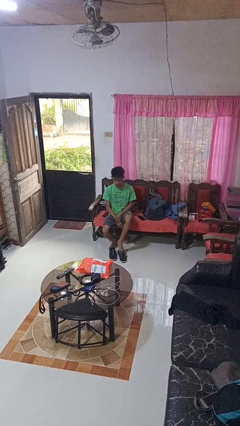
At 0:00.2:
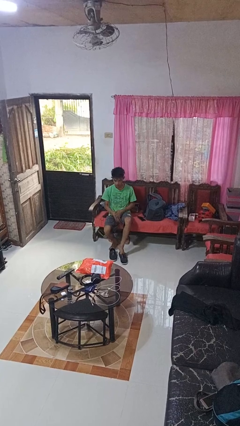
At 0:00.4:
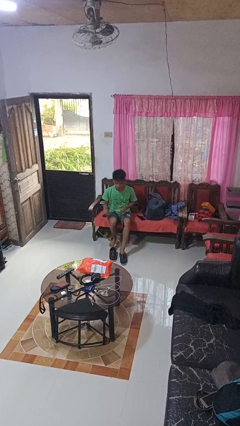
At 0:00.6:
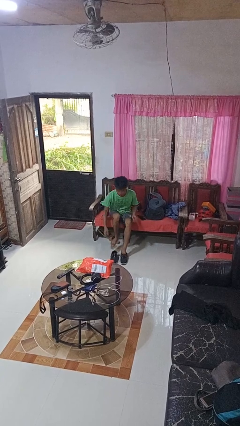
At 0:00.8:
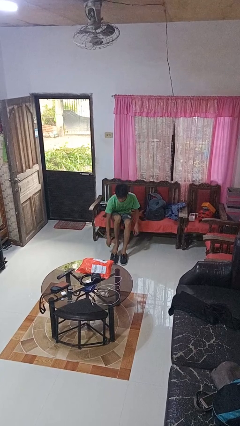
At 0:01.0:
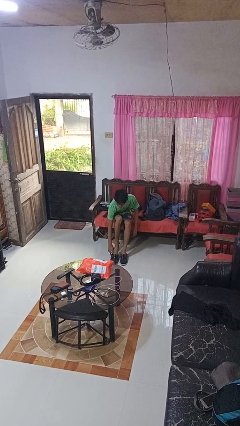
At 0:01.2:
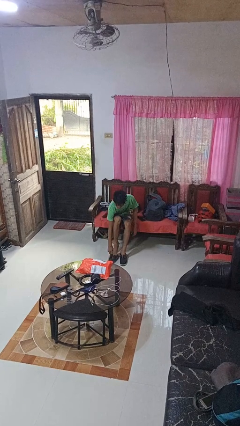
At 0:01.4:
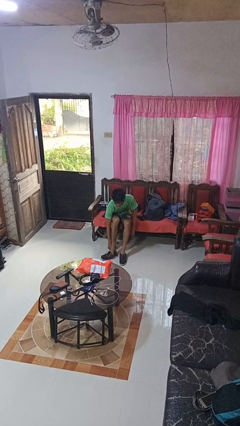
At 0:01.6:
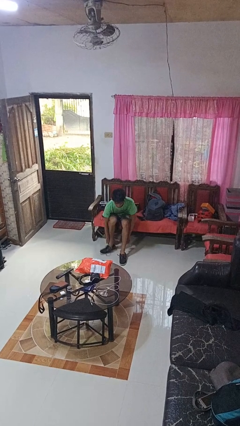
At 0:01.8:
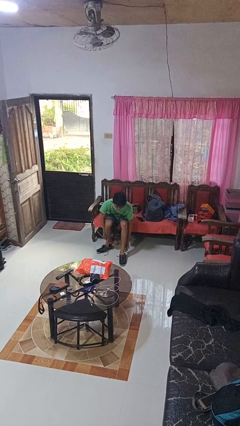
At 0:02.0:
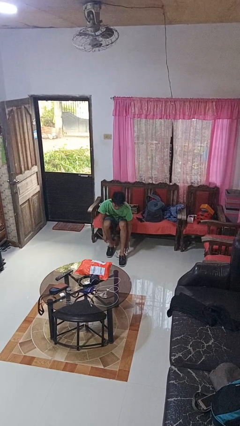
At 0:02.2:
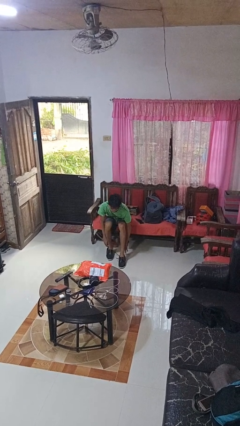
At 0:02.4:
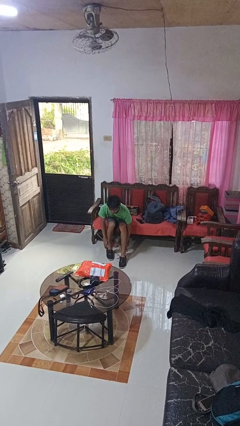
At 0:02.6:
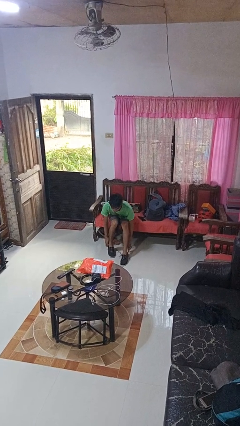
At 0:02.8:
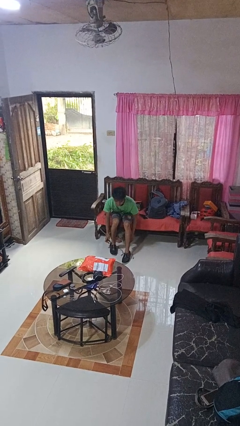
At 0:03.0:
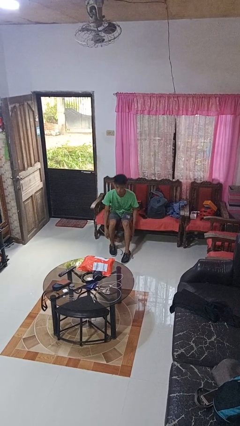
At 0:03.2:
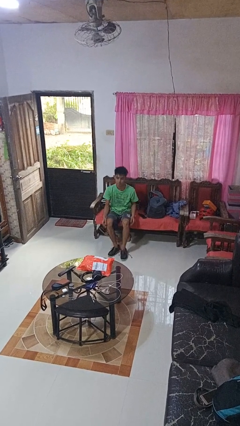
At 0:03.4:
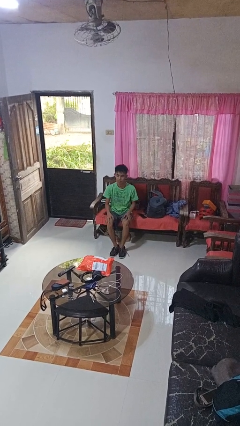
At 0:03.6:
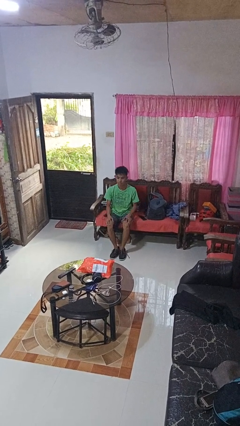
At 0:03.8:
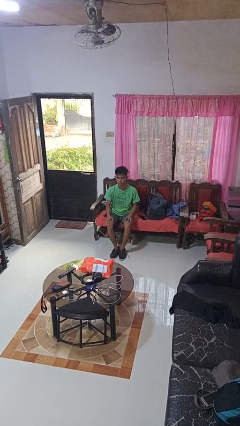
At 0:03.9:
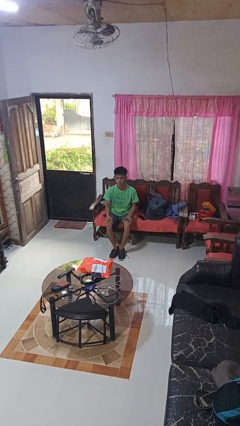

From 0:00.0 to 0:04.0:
person puts on shoes

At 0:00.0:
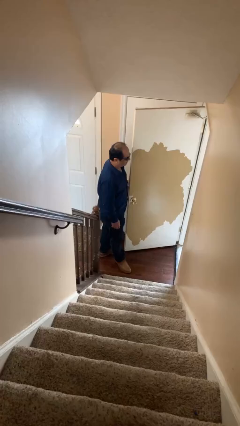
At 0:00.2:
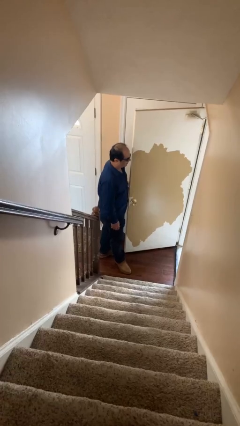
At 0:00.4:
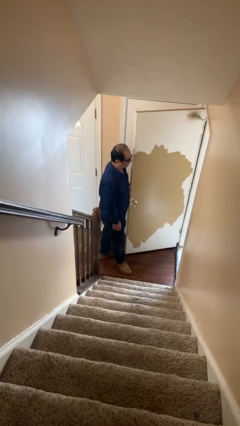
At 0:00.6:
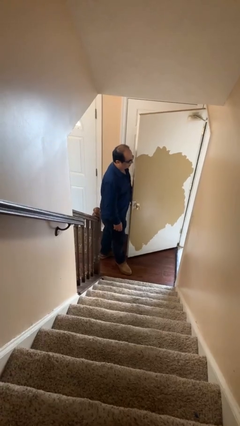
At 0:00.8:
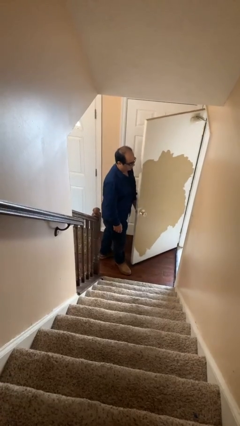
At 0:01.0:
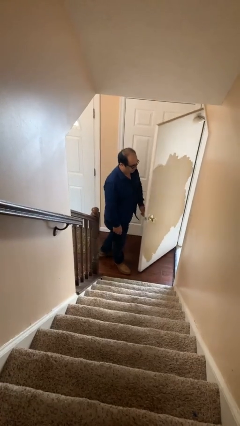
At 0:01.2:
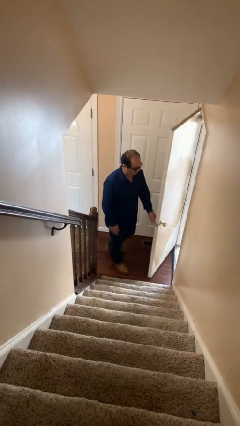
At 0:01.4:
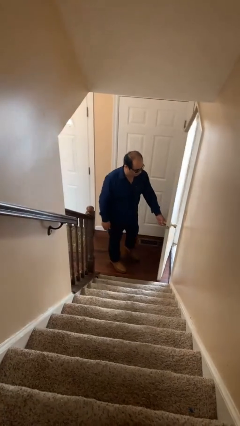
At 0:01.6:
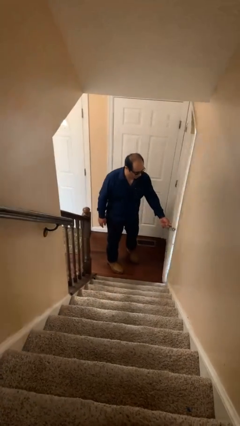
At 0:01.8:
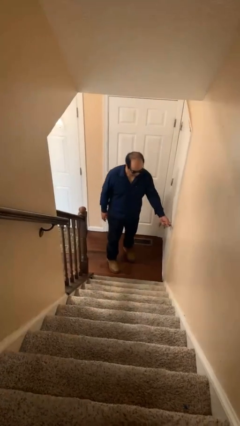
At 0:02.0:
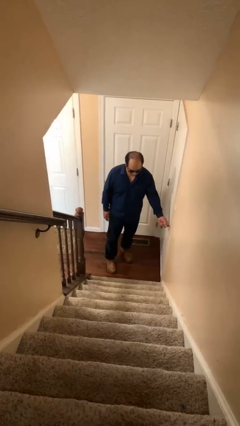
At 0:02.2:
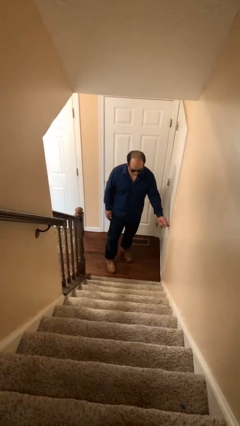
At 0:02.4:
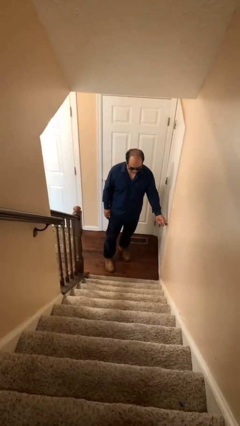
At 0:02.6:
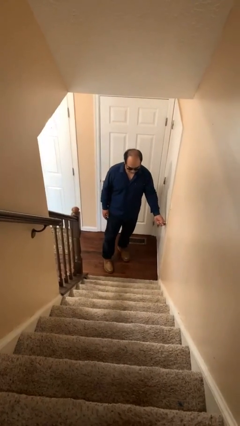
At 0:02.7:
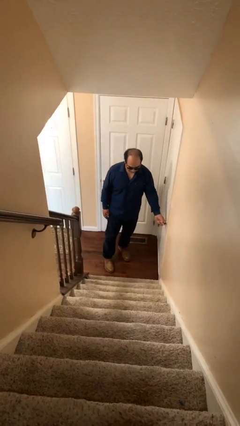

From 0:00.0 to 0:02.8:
person closes facility door

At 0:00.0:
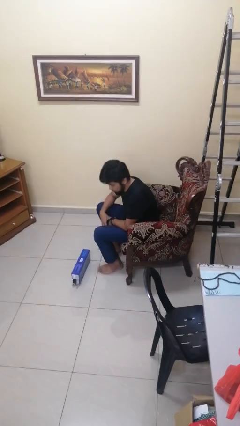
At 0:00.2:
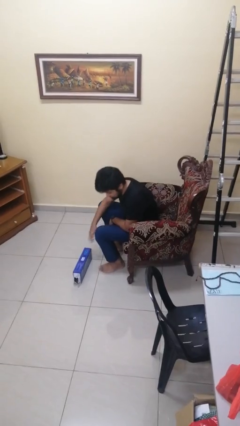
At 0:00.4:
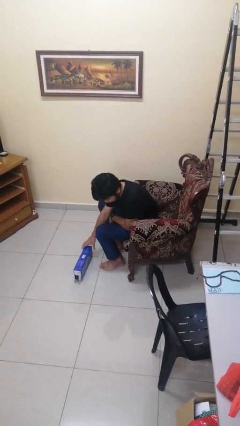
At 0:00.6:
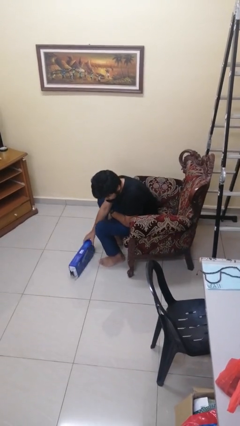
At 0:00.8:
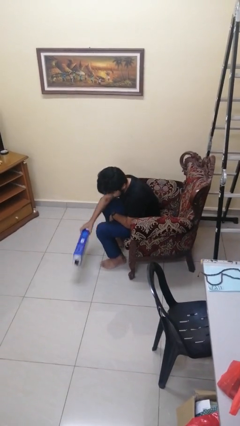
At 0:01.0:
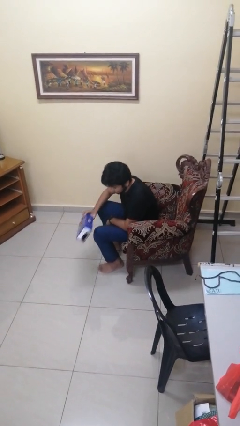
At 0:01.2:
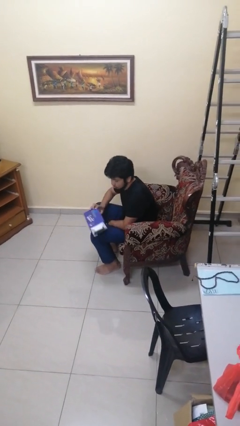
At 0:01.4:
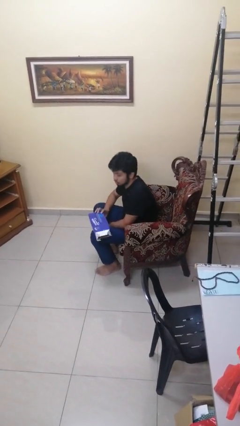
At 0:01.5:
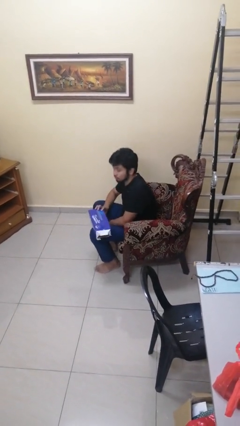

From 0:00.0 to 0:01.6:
person picks up object from floor

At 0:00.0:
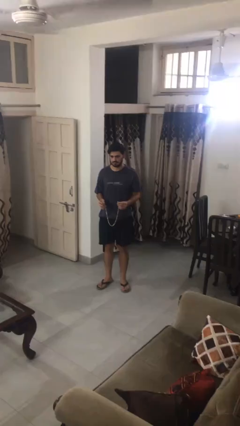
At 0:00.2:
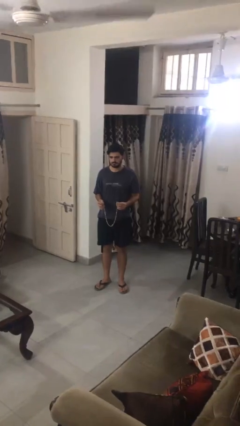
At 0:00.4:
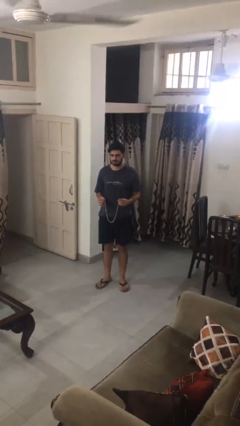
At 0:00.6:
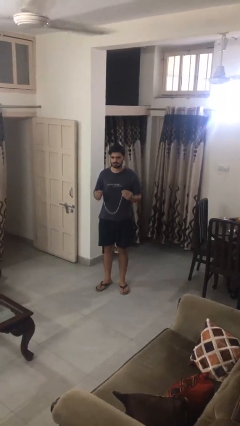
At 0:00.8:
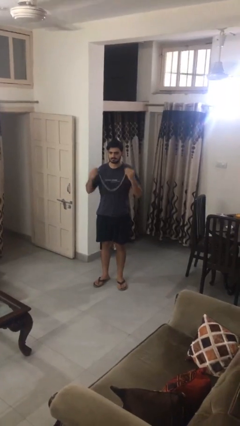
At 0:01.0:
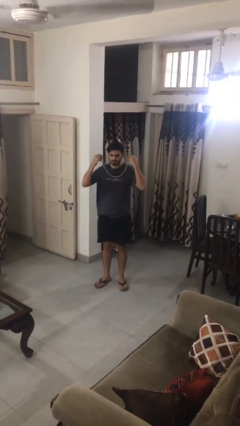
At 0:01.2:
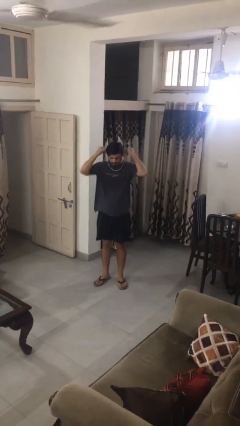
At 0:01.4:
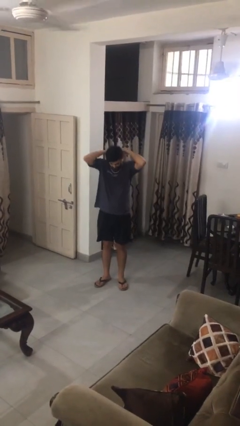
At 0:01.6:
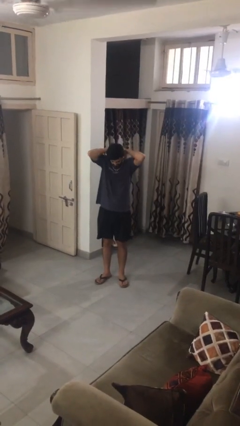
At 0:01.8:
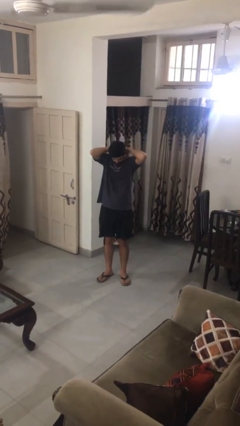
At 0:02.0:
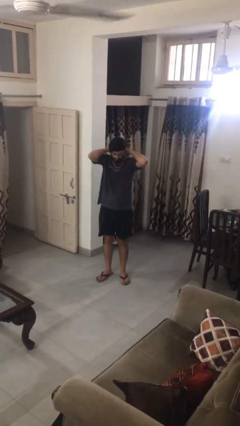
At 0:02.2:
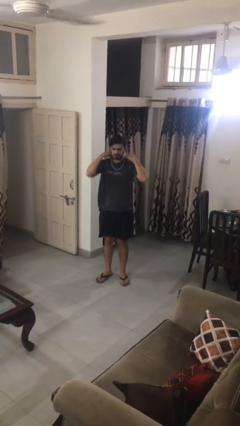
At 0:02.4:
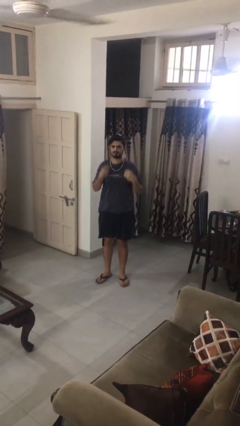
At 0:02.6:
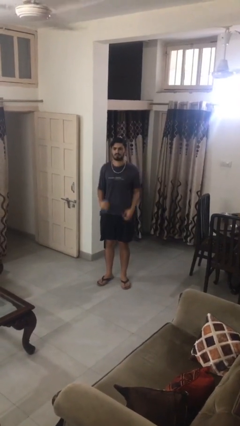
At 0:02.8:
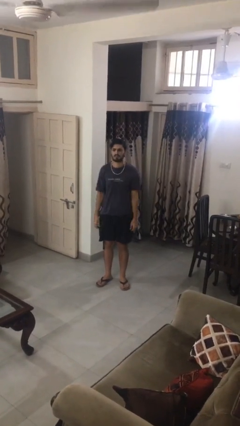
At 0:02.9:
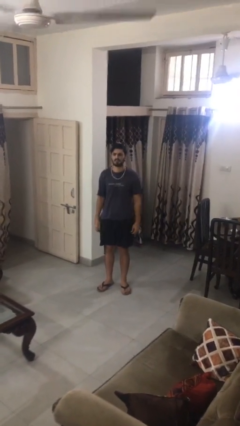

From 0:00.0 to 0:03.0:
person puts on necklace

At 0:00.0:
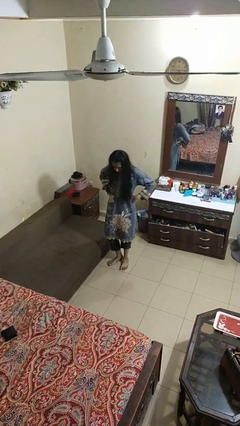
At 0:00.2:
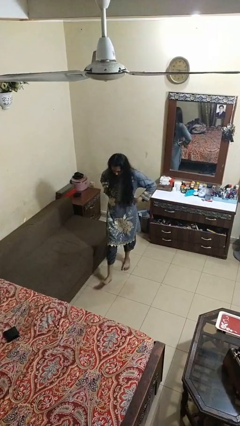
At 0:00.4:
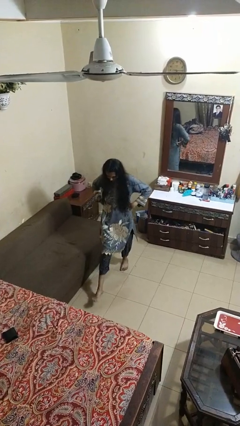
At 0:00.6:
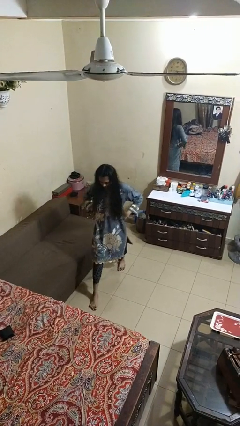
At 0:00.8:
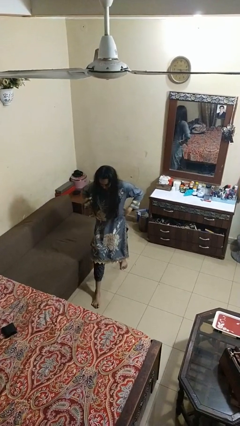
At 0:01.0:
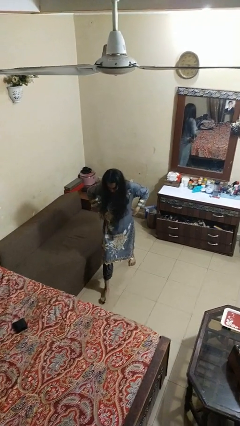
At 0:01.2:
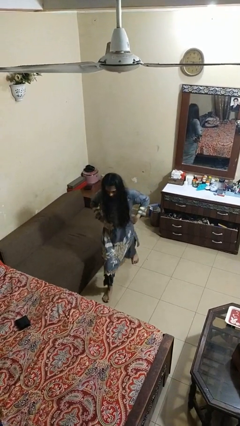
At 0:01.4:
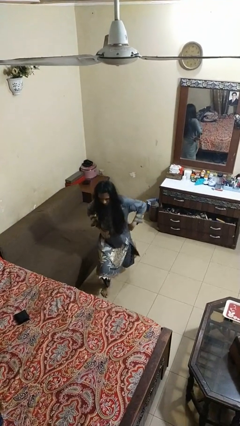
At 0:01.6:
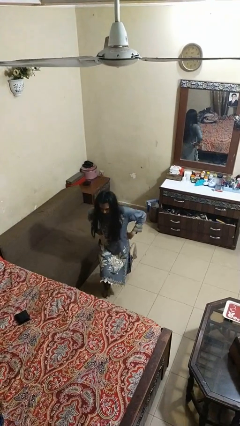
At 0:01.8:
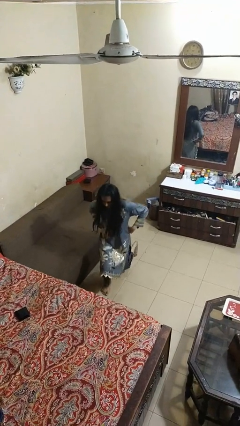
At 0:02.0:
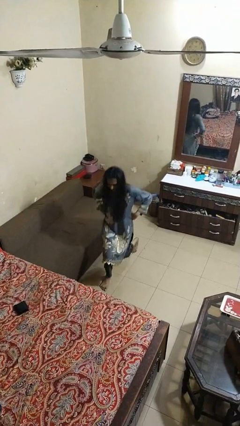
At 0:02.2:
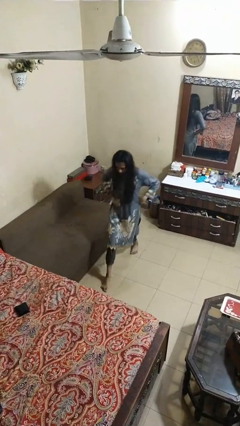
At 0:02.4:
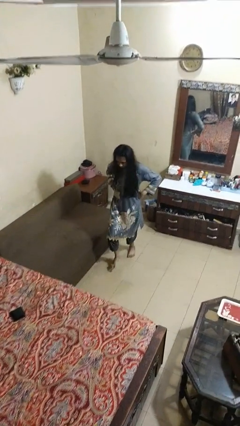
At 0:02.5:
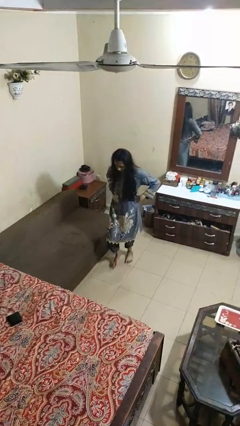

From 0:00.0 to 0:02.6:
person exercises with lunges

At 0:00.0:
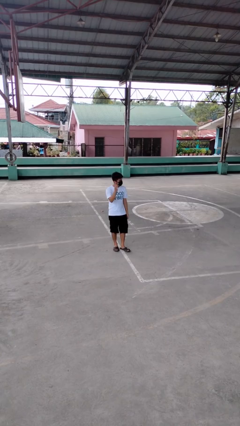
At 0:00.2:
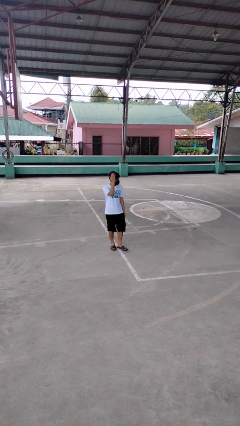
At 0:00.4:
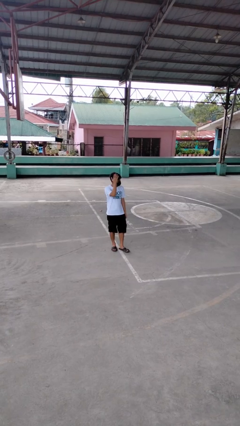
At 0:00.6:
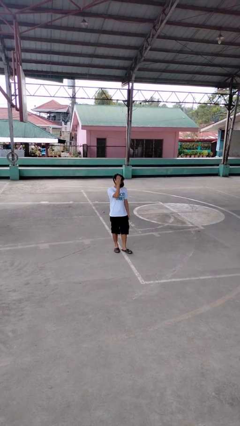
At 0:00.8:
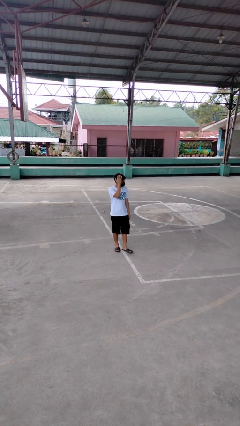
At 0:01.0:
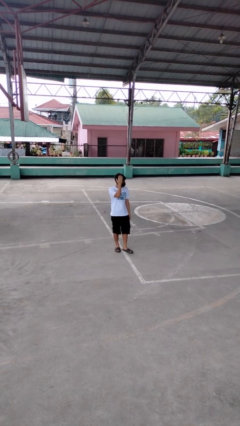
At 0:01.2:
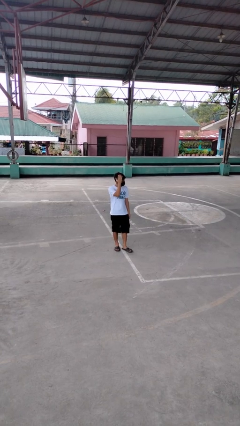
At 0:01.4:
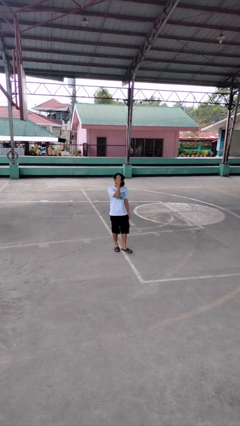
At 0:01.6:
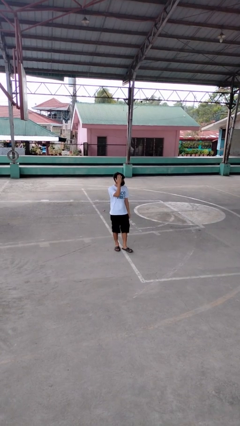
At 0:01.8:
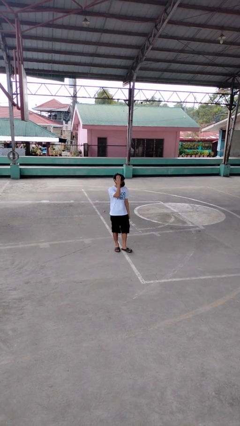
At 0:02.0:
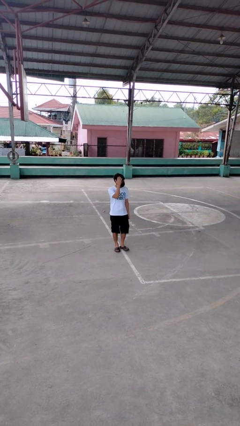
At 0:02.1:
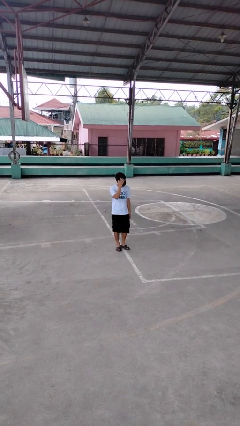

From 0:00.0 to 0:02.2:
person pats head

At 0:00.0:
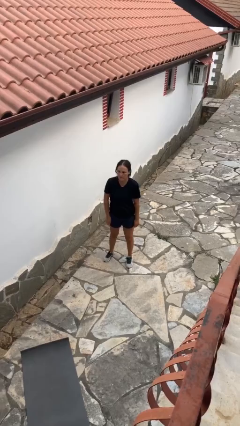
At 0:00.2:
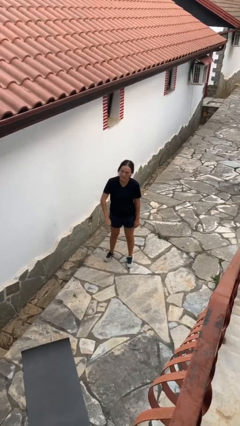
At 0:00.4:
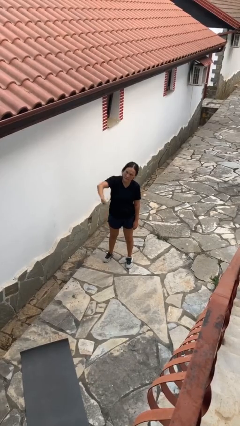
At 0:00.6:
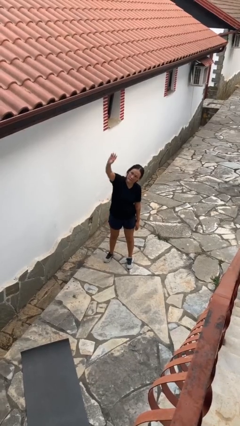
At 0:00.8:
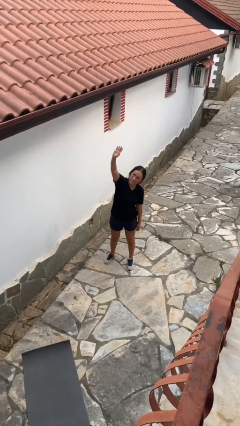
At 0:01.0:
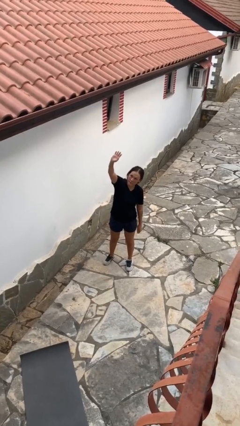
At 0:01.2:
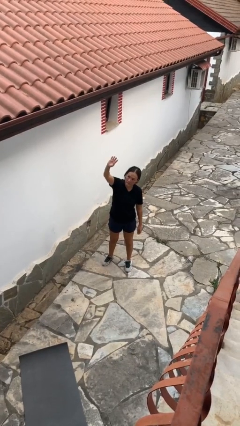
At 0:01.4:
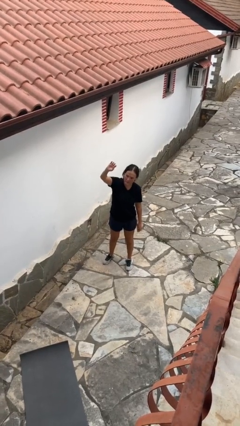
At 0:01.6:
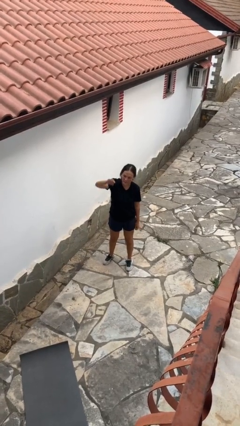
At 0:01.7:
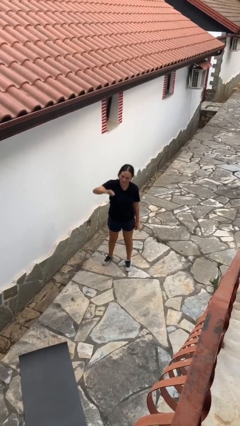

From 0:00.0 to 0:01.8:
person gestures swipe up
